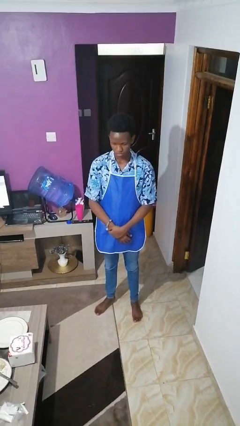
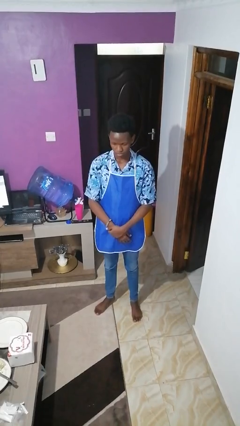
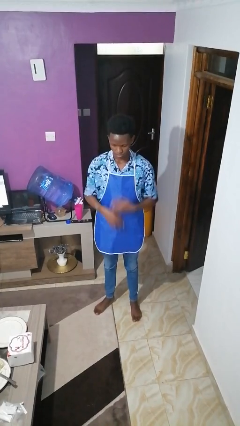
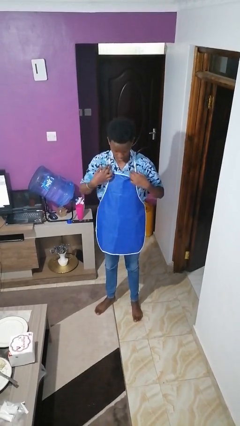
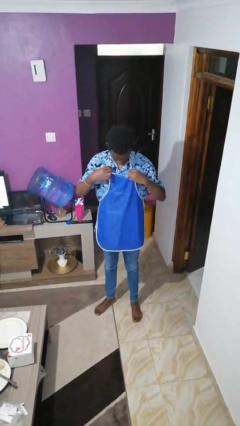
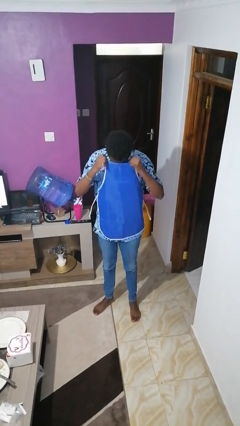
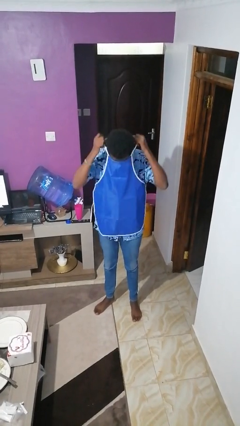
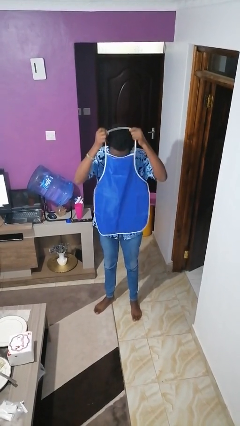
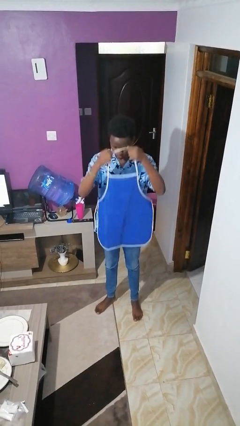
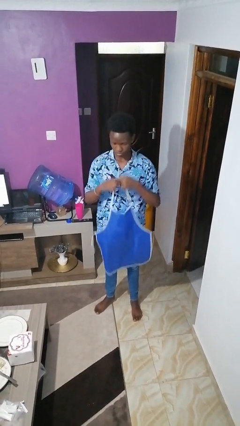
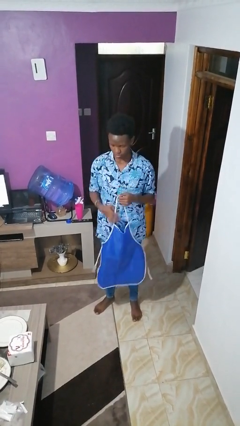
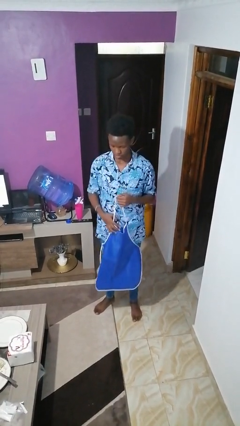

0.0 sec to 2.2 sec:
person takes off apron

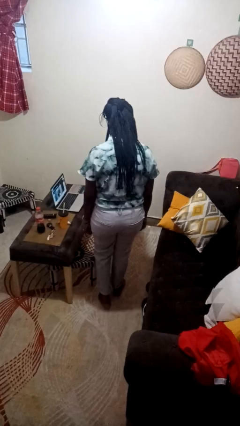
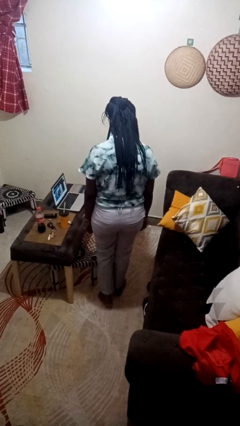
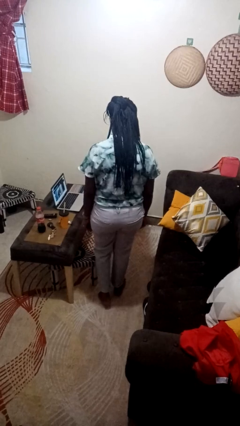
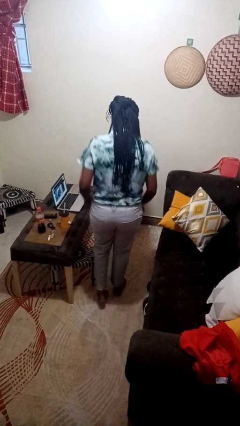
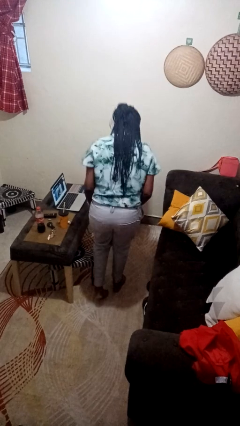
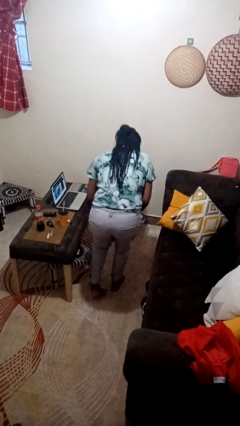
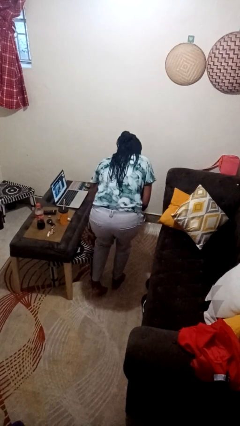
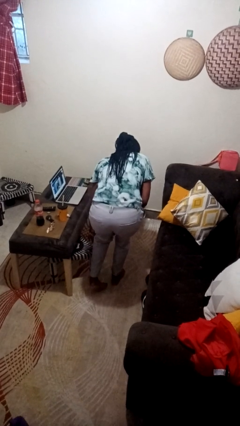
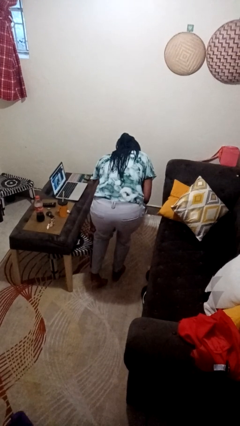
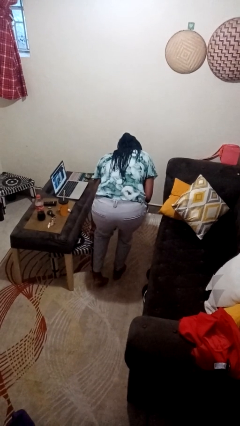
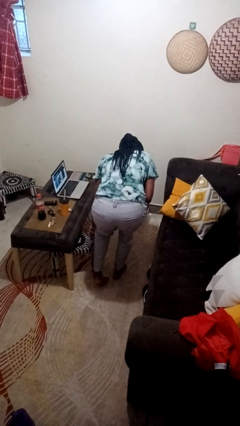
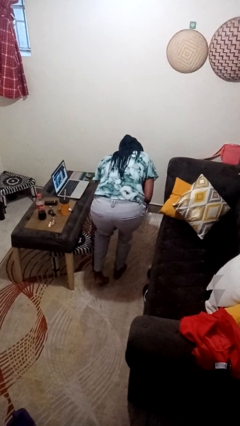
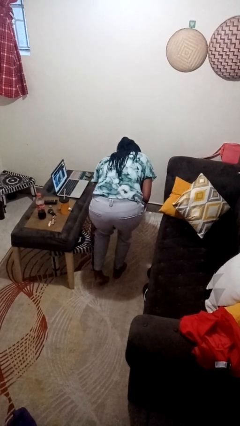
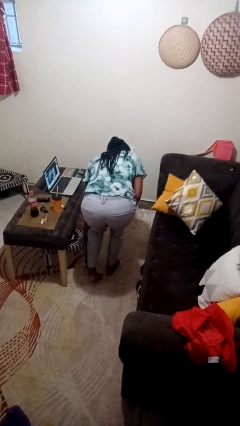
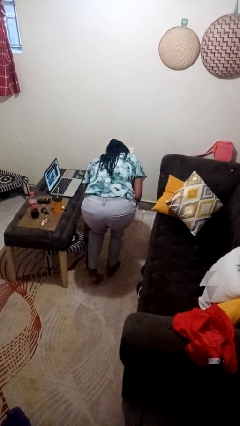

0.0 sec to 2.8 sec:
person trips on object on floor

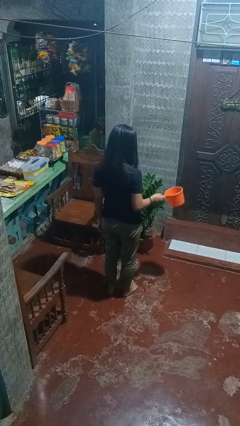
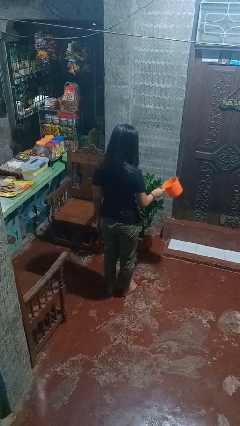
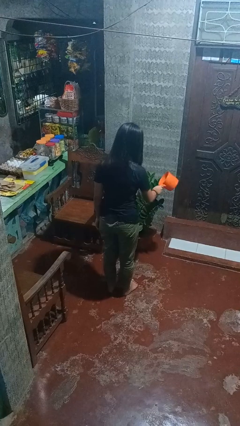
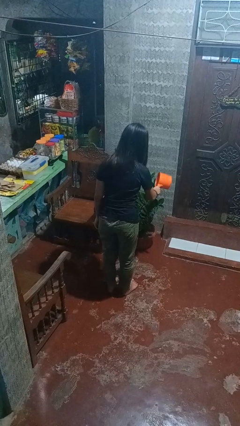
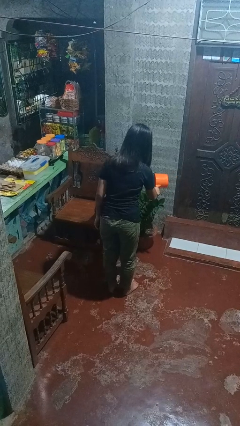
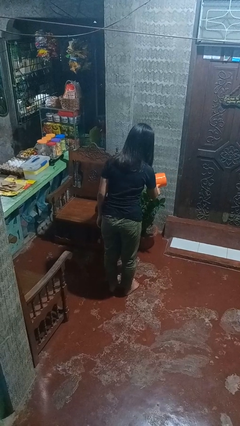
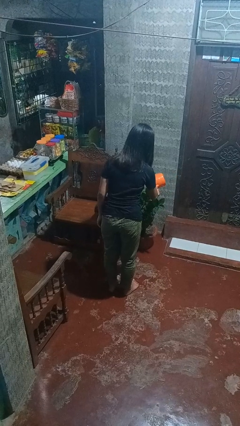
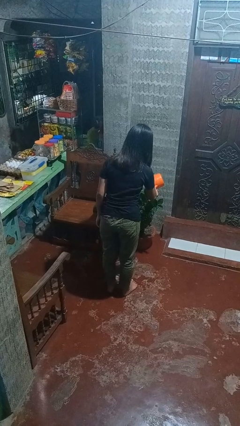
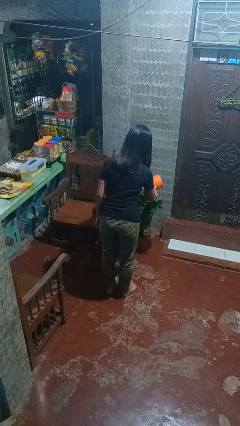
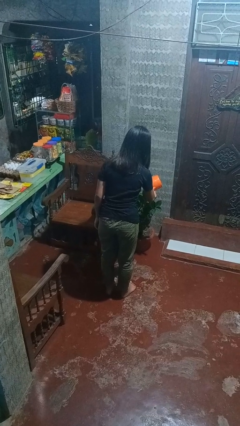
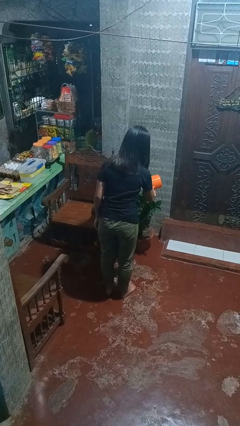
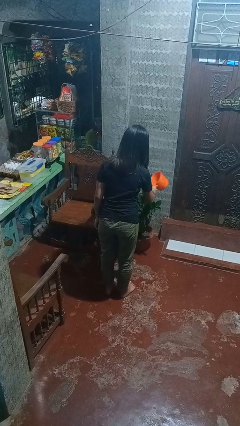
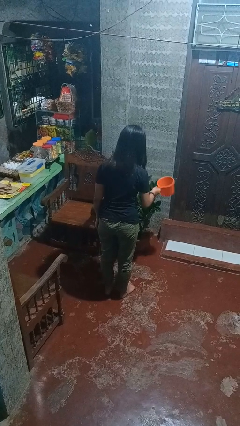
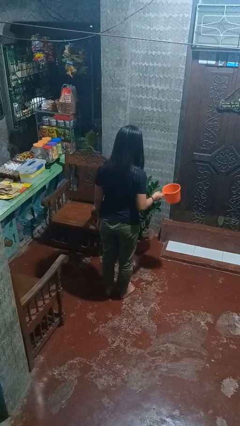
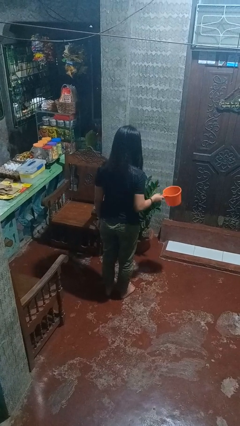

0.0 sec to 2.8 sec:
person waters houseplant

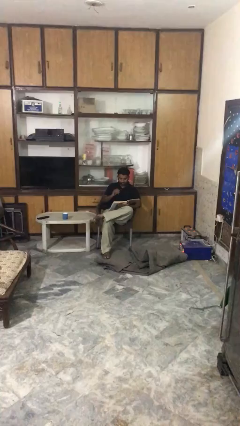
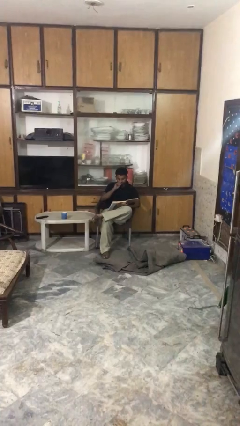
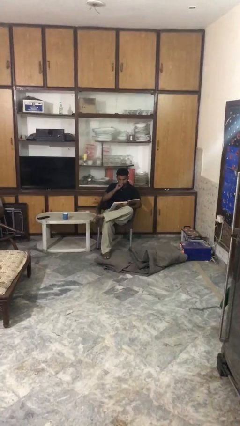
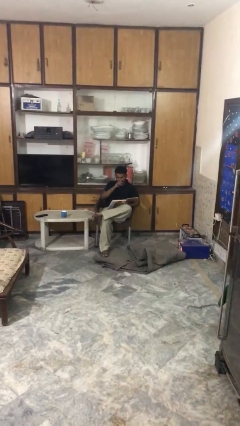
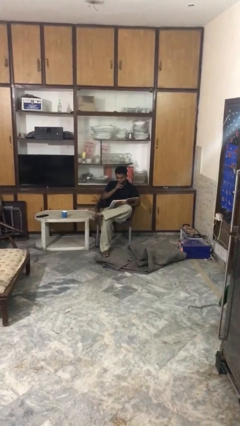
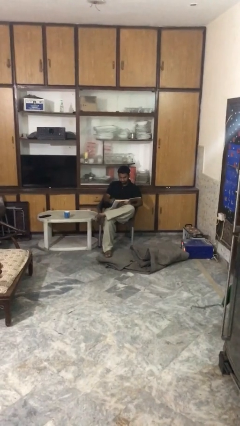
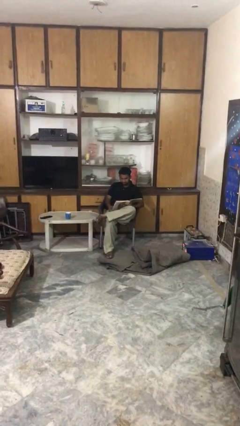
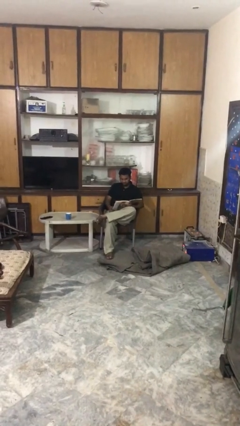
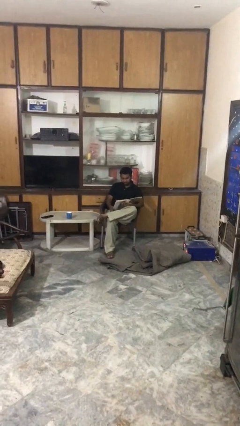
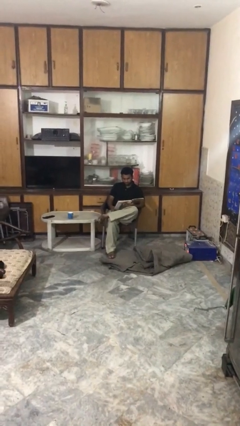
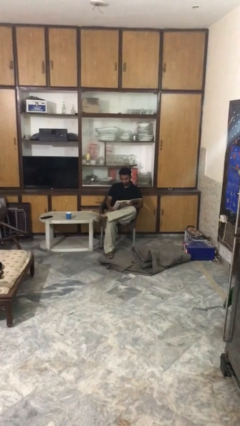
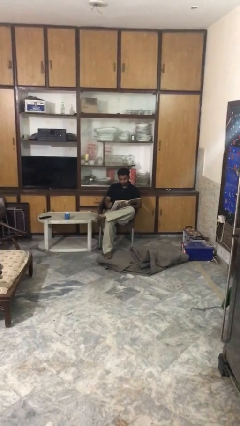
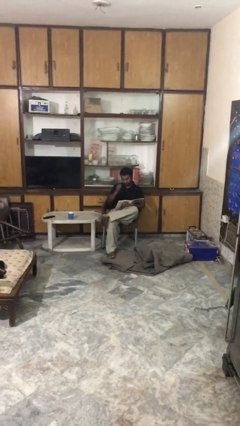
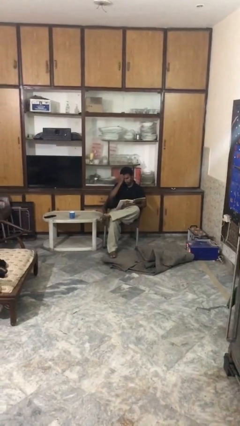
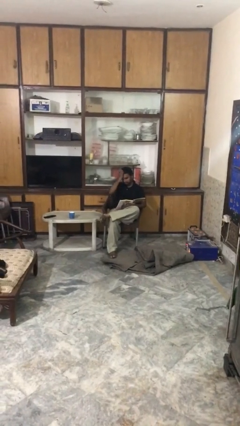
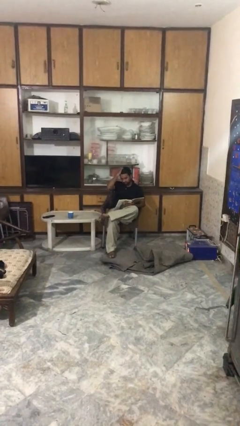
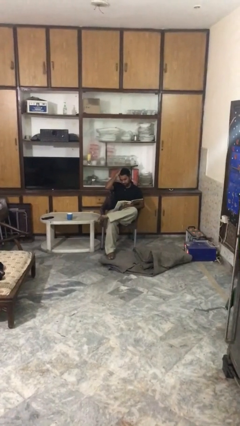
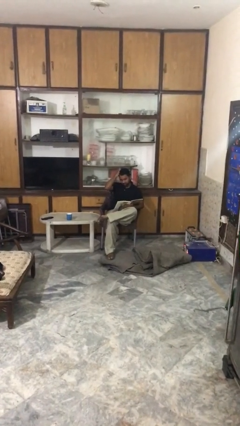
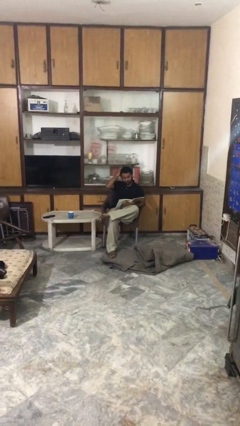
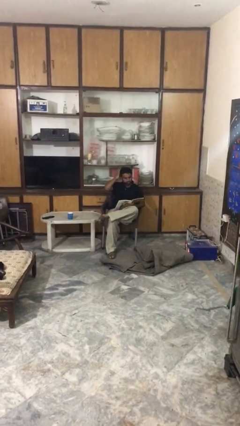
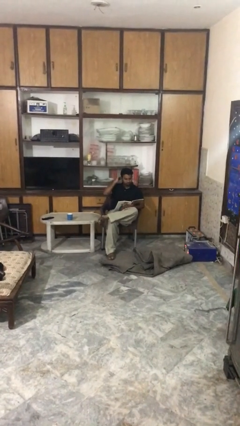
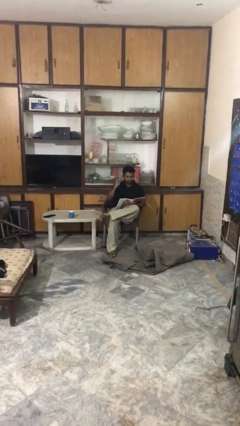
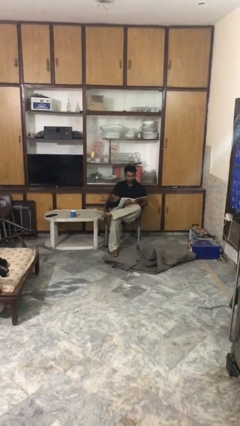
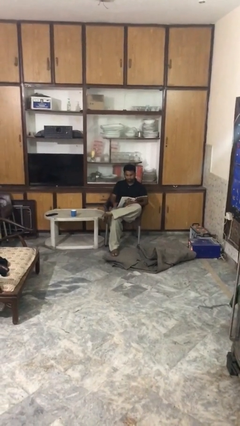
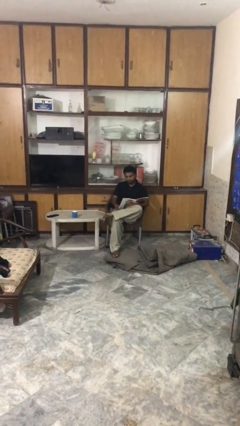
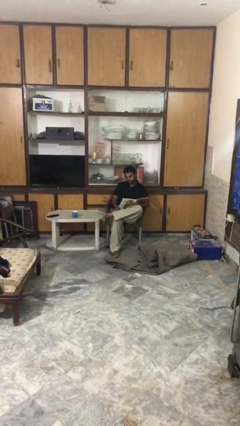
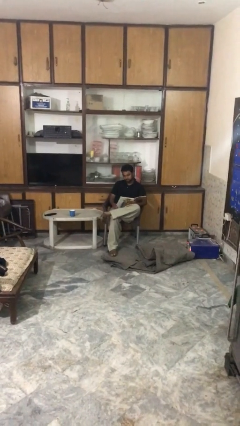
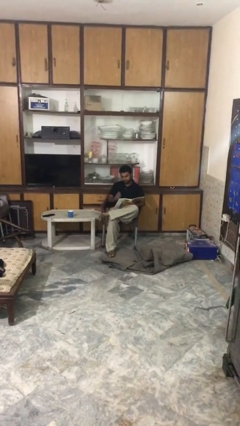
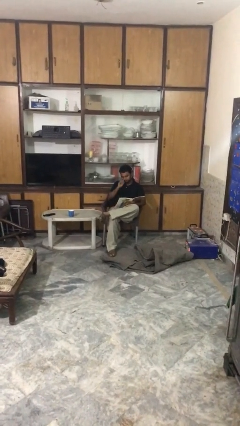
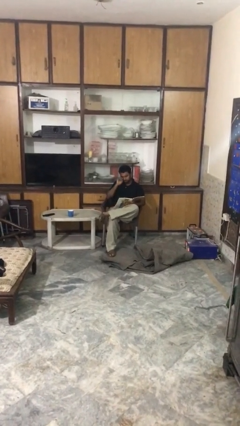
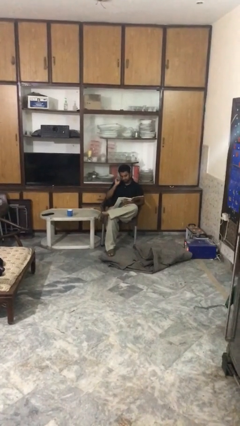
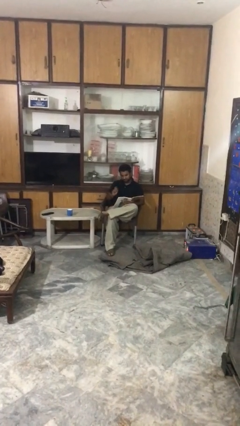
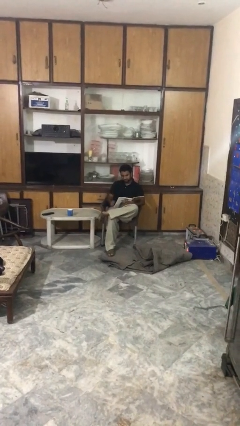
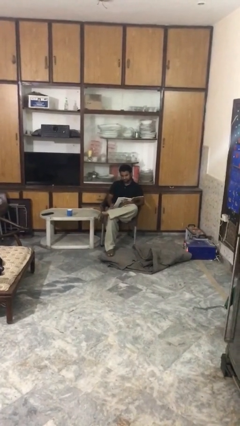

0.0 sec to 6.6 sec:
person reads document

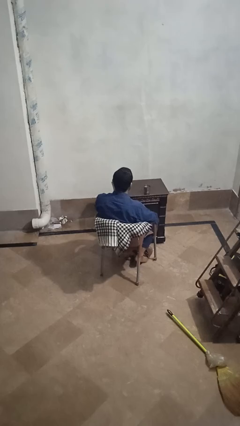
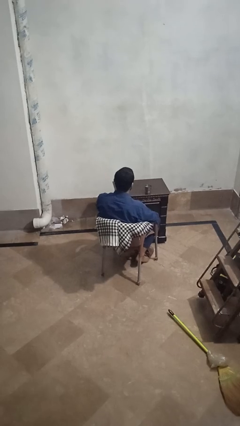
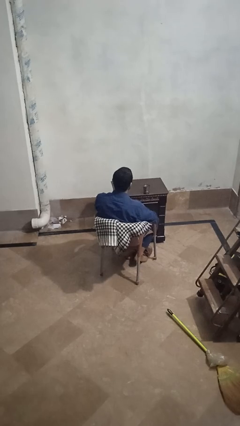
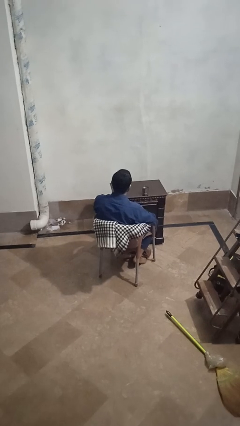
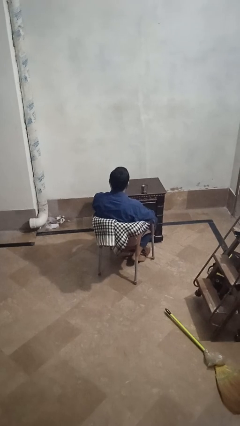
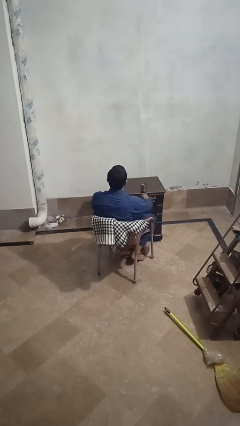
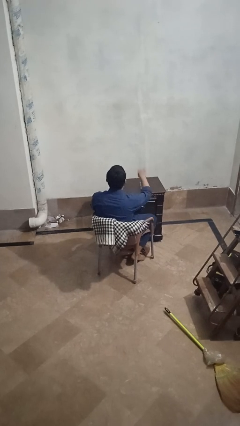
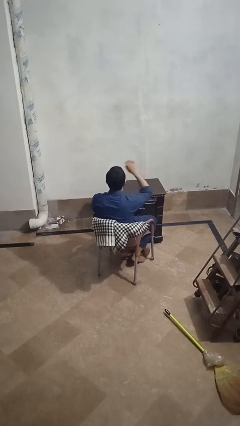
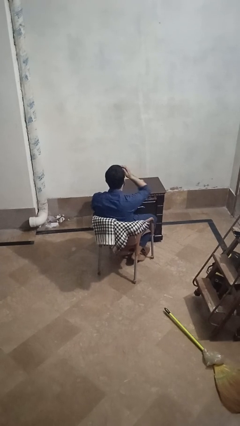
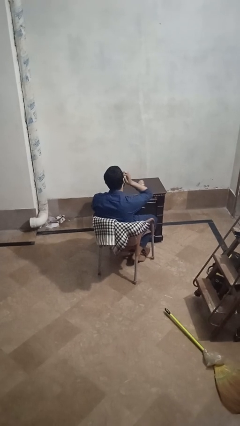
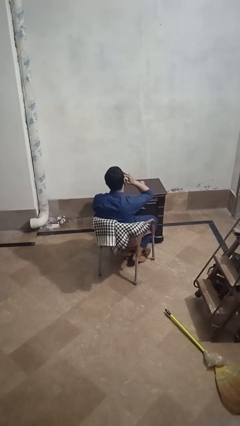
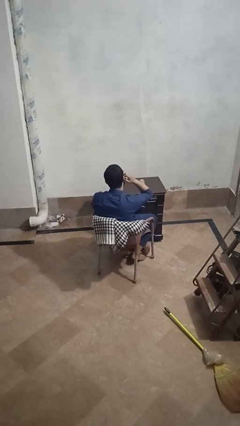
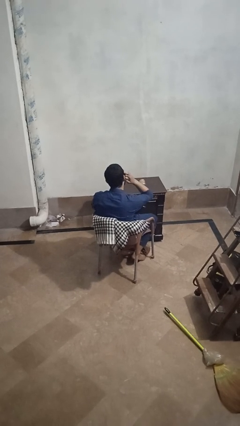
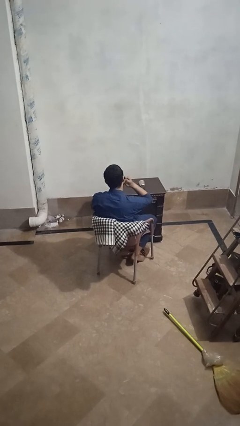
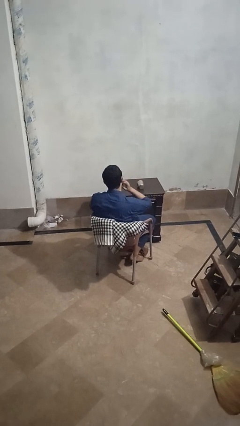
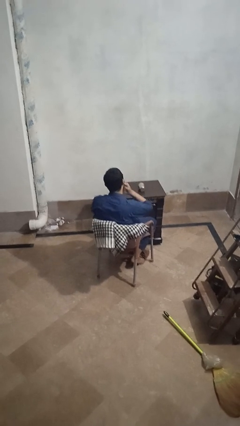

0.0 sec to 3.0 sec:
person knocks over glass

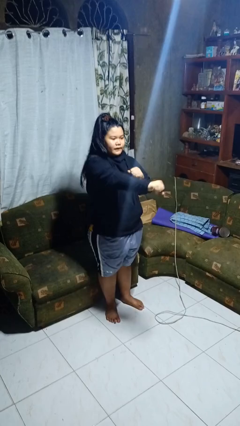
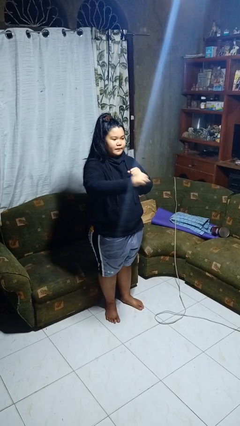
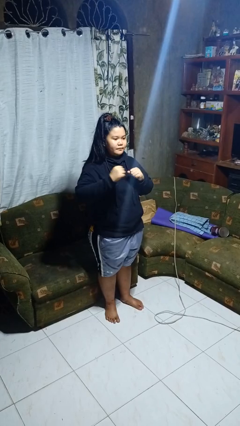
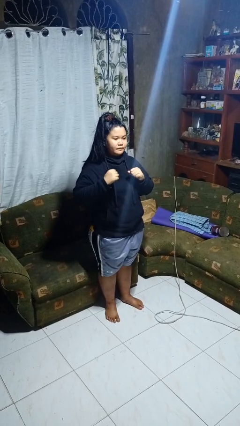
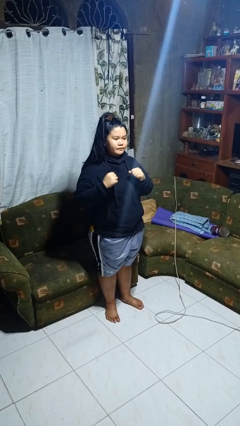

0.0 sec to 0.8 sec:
person punches
